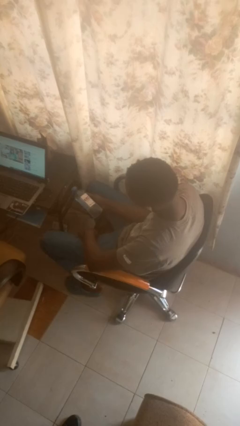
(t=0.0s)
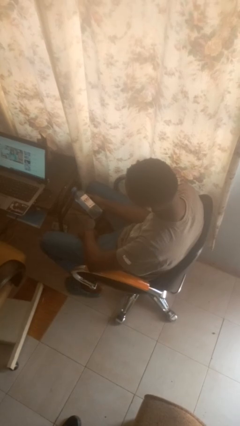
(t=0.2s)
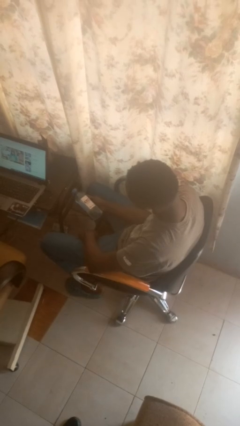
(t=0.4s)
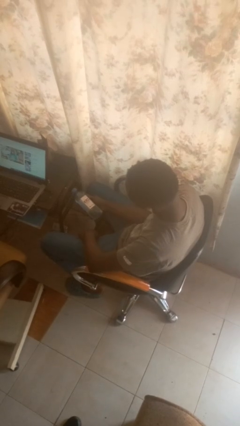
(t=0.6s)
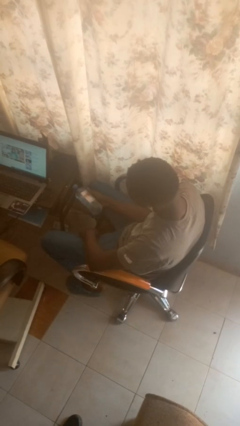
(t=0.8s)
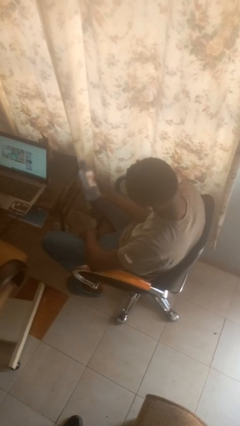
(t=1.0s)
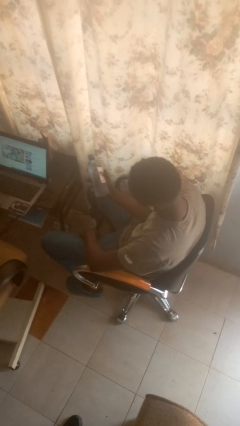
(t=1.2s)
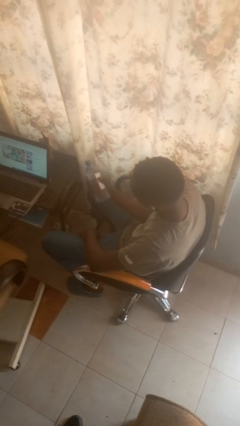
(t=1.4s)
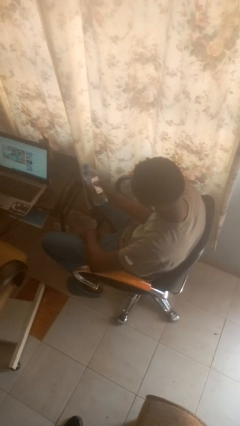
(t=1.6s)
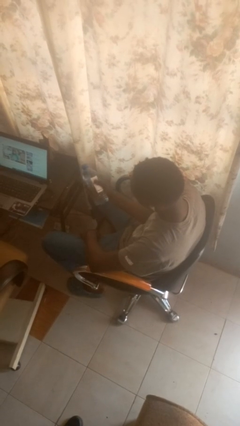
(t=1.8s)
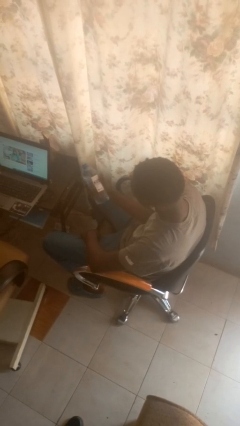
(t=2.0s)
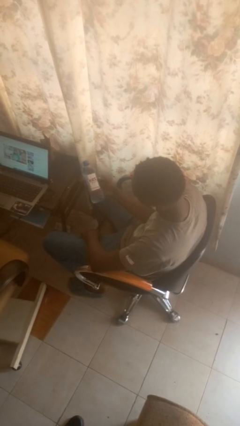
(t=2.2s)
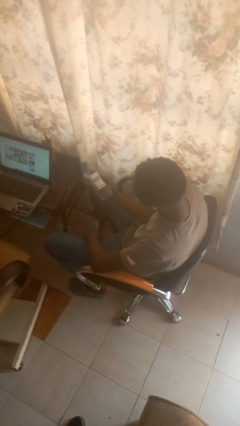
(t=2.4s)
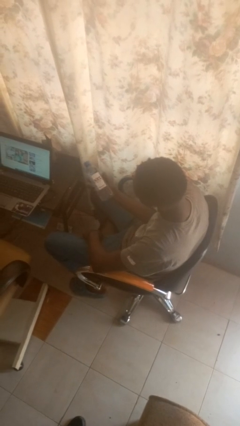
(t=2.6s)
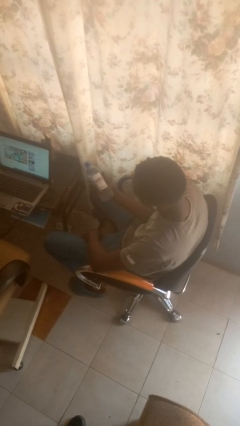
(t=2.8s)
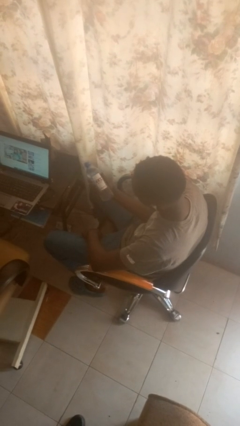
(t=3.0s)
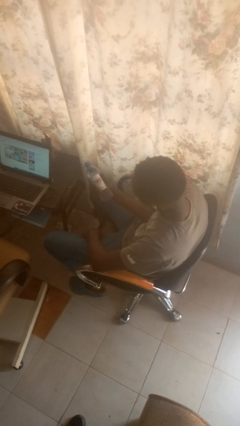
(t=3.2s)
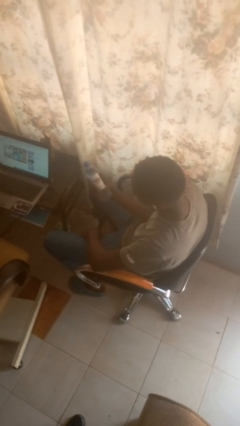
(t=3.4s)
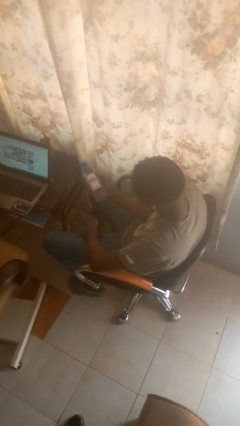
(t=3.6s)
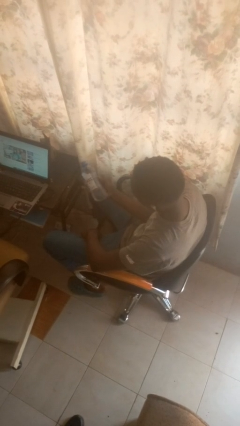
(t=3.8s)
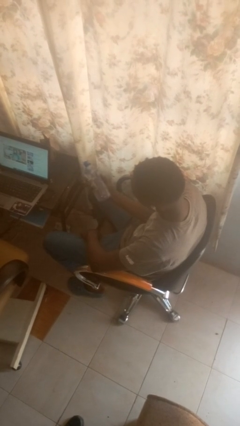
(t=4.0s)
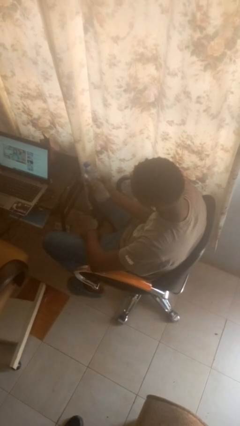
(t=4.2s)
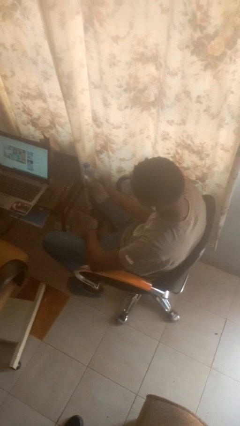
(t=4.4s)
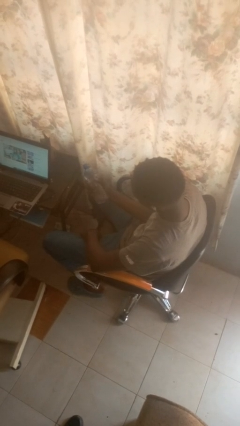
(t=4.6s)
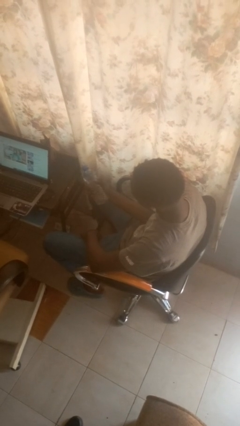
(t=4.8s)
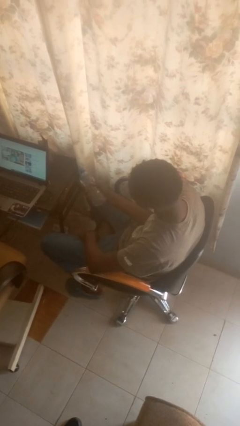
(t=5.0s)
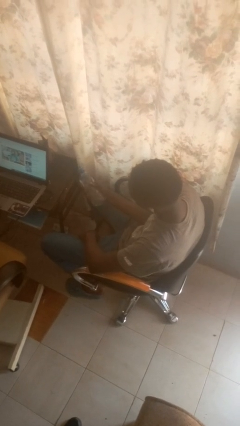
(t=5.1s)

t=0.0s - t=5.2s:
person squeezes object

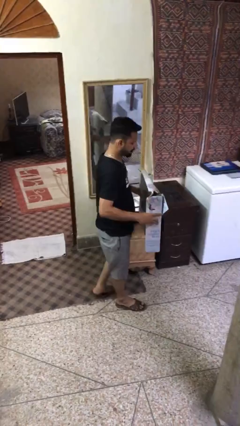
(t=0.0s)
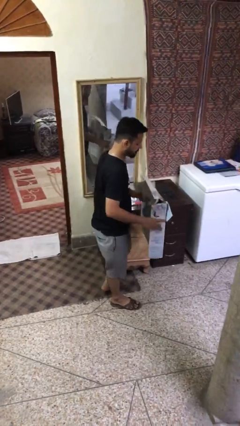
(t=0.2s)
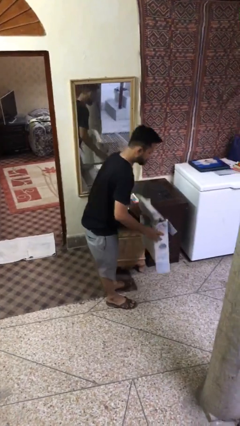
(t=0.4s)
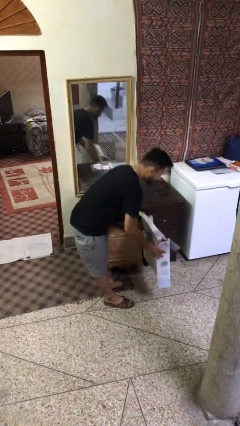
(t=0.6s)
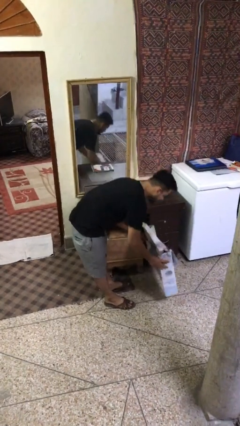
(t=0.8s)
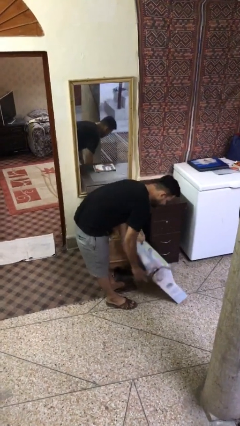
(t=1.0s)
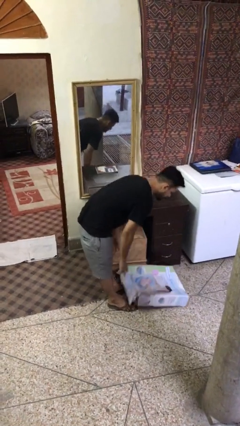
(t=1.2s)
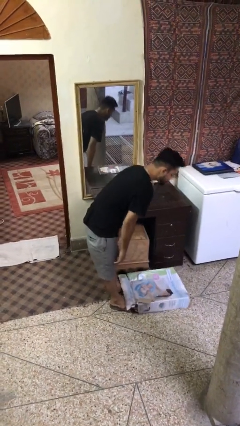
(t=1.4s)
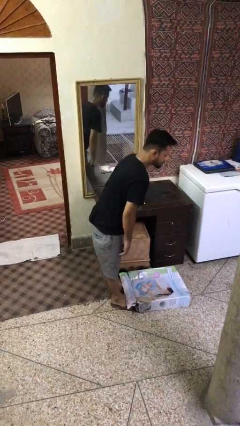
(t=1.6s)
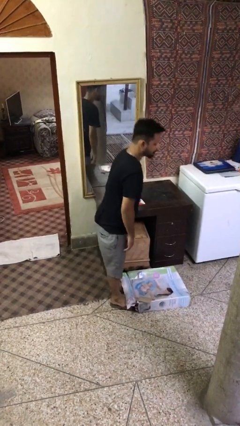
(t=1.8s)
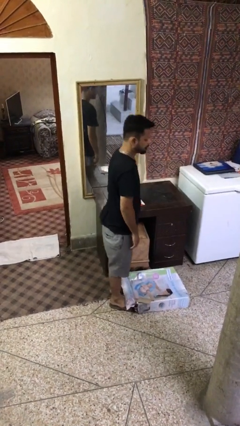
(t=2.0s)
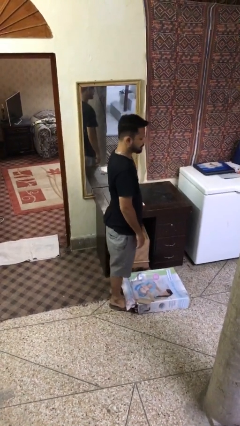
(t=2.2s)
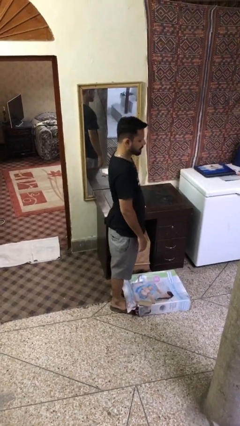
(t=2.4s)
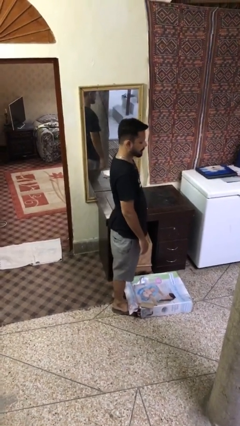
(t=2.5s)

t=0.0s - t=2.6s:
person puts down object on floor

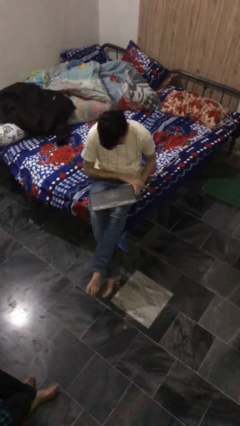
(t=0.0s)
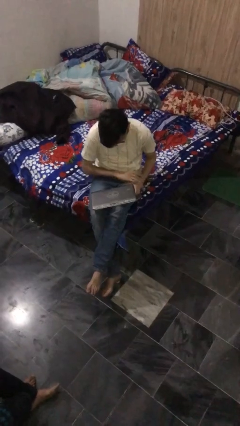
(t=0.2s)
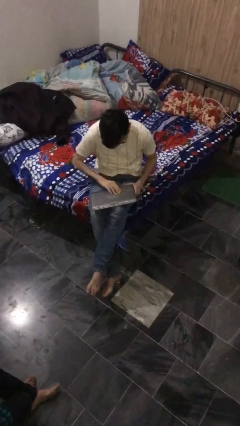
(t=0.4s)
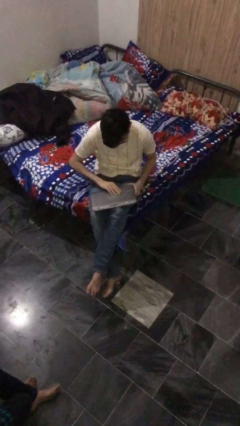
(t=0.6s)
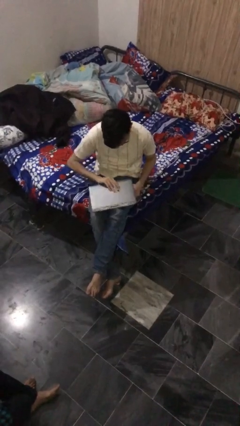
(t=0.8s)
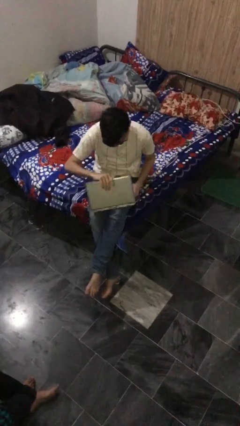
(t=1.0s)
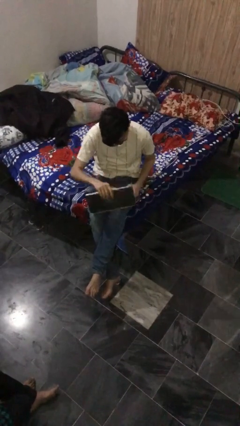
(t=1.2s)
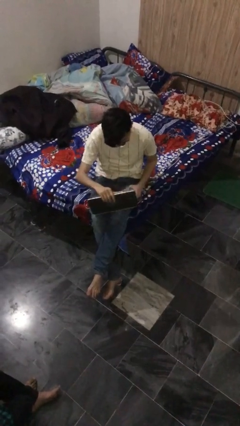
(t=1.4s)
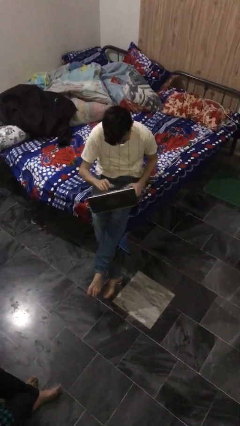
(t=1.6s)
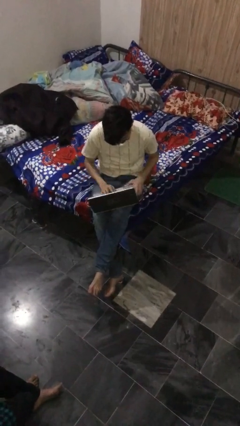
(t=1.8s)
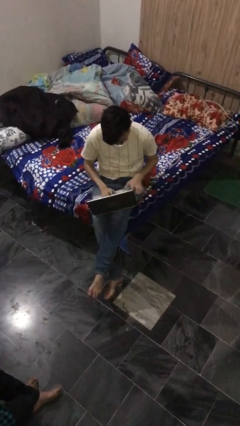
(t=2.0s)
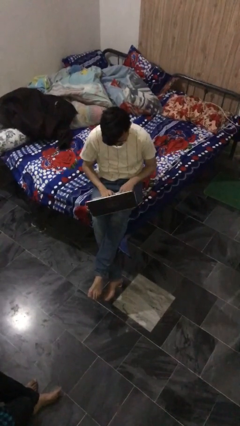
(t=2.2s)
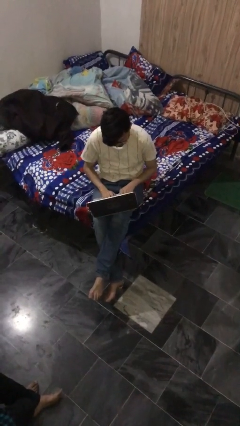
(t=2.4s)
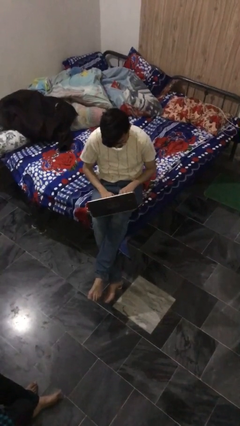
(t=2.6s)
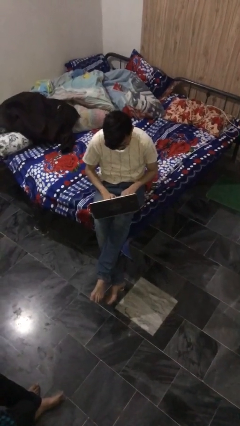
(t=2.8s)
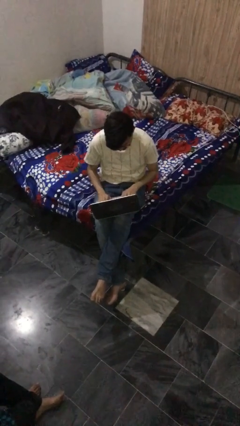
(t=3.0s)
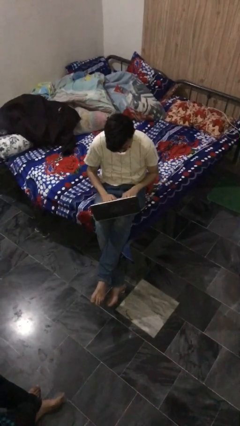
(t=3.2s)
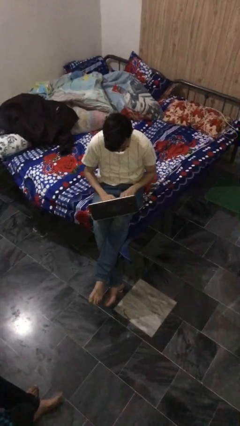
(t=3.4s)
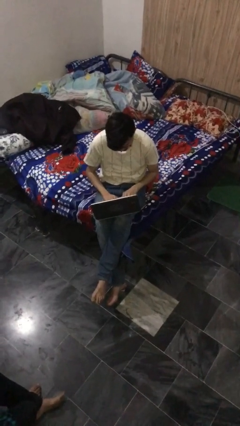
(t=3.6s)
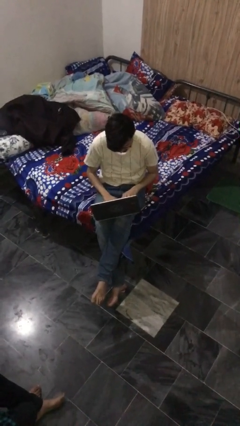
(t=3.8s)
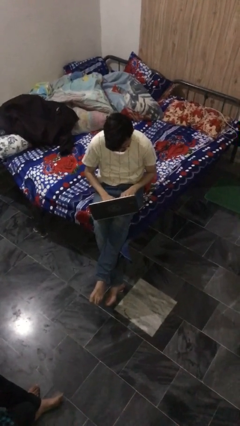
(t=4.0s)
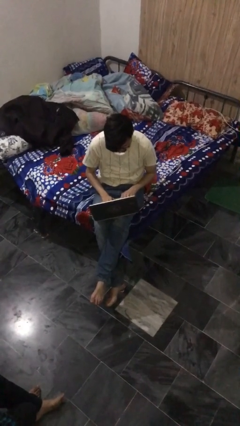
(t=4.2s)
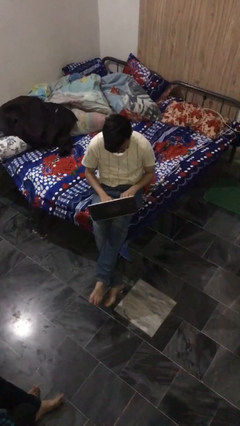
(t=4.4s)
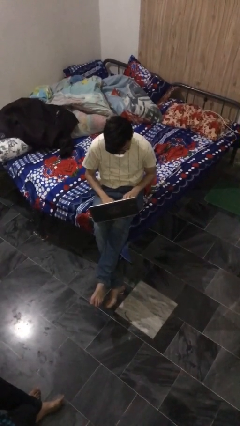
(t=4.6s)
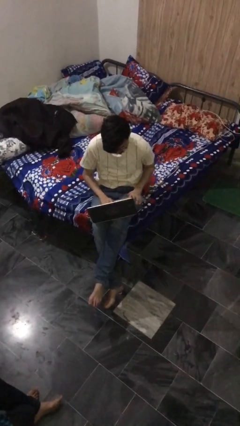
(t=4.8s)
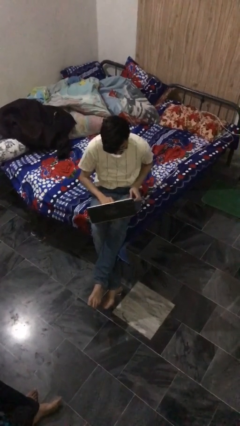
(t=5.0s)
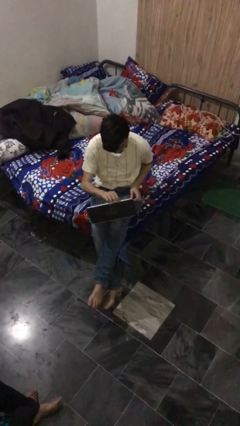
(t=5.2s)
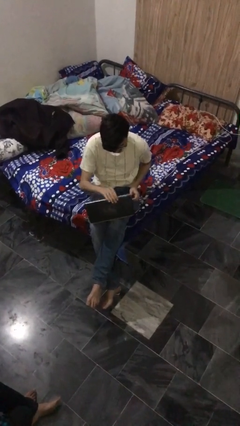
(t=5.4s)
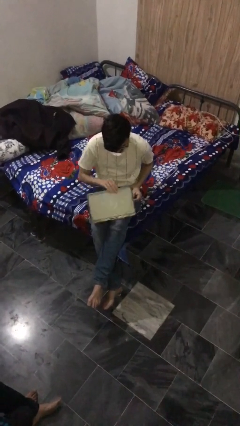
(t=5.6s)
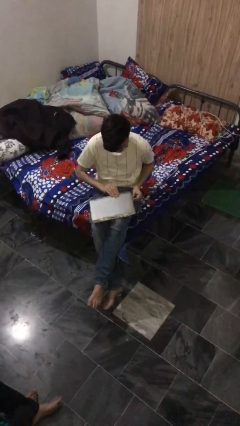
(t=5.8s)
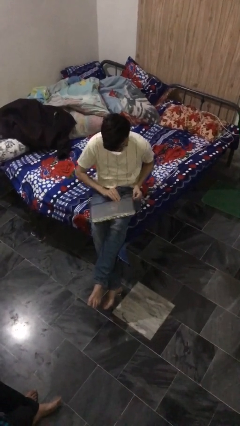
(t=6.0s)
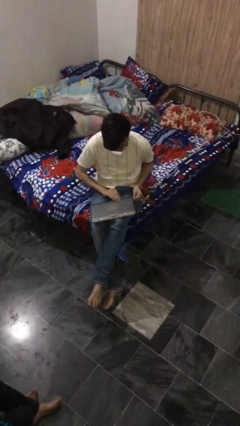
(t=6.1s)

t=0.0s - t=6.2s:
person interacts with laptop

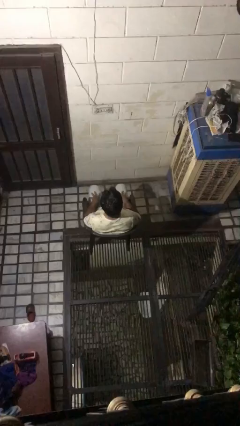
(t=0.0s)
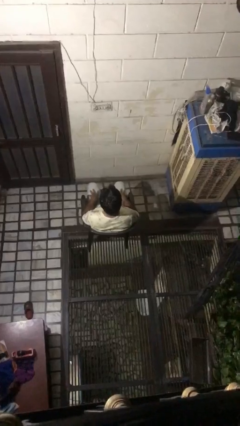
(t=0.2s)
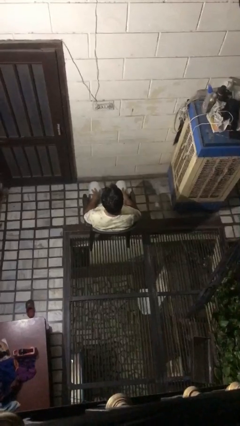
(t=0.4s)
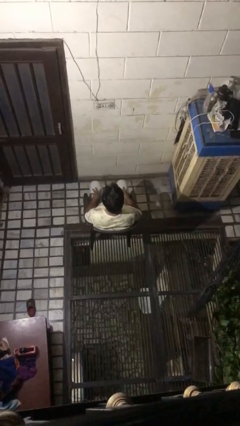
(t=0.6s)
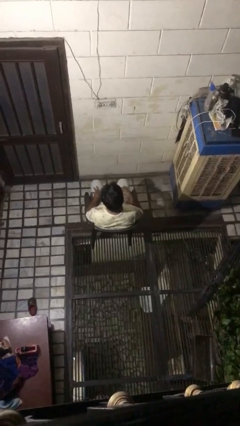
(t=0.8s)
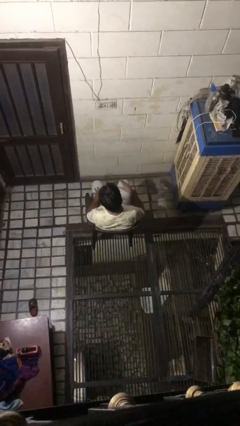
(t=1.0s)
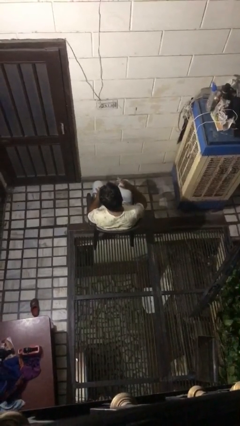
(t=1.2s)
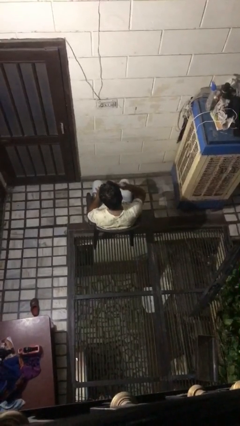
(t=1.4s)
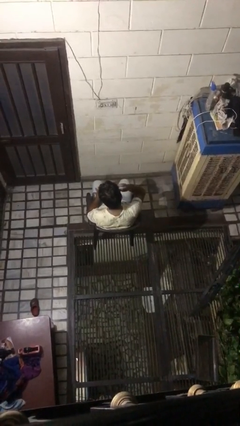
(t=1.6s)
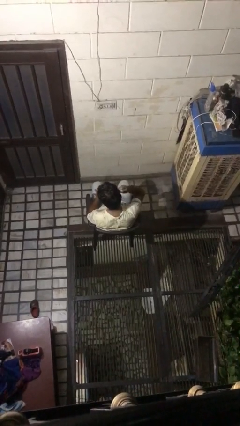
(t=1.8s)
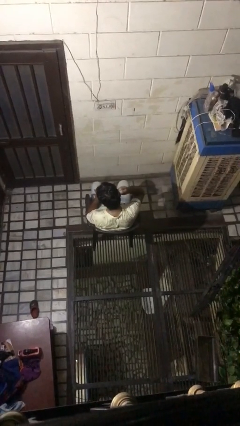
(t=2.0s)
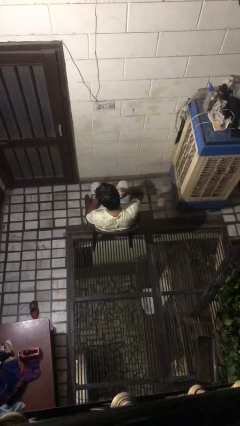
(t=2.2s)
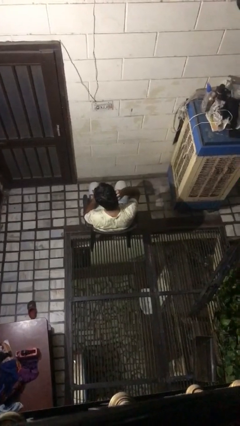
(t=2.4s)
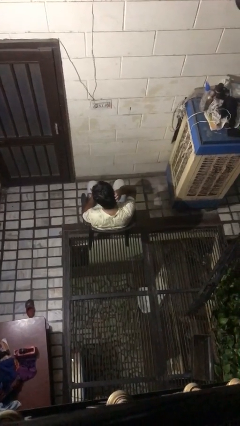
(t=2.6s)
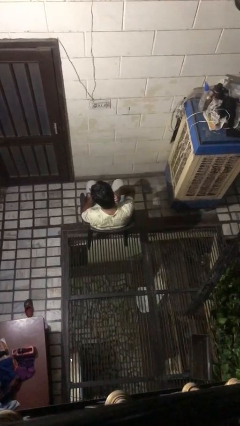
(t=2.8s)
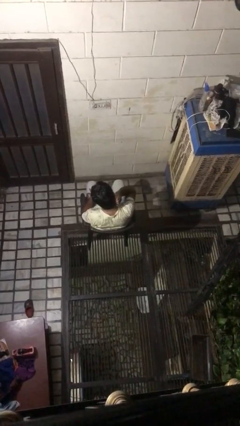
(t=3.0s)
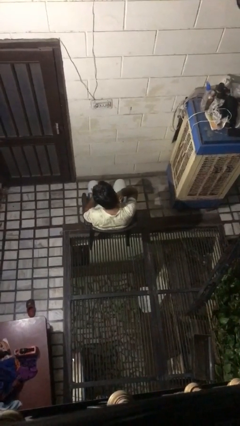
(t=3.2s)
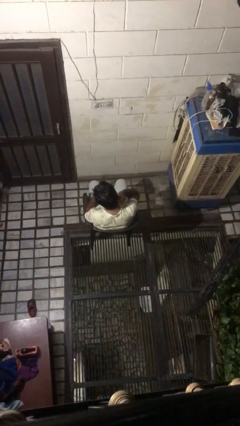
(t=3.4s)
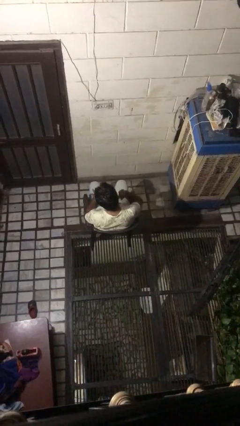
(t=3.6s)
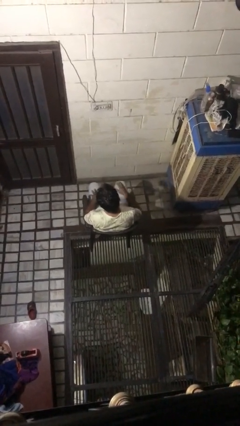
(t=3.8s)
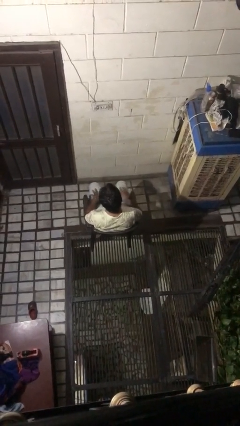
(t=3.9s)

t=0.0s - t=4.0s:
person strokes hair
